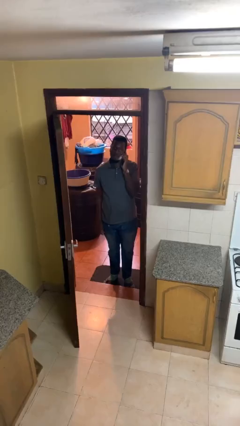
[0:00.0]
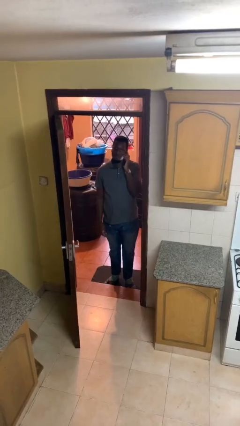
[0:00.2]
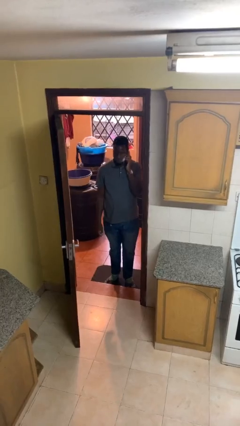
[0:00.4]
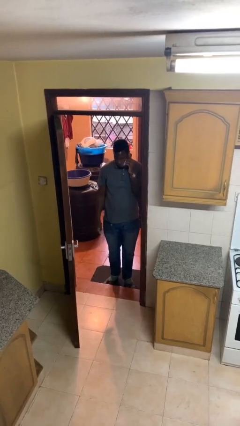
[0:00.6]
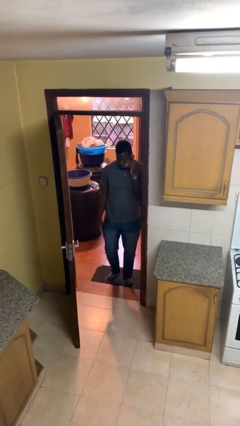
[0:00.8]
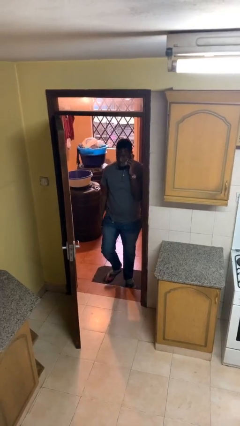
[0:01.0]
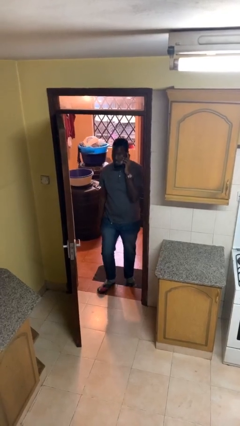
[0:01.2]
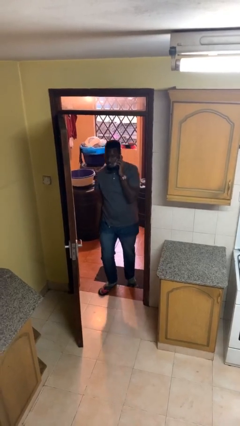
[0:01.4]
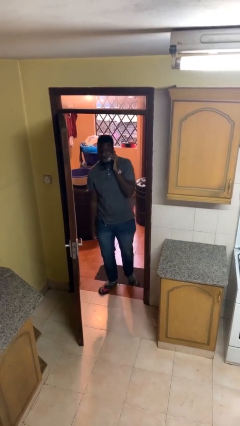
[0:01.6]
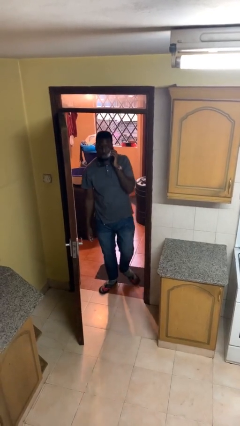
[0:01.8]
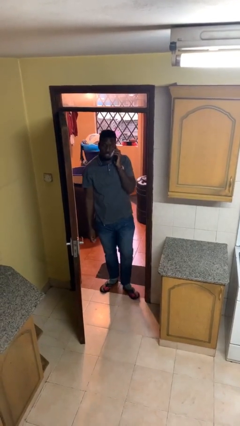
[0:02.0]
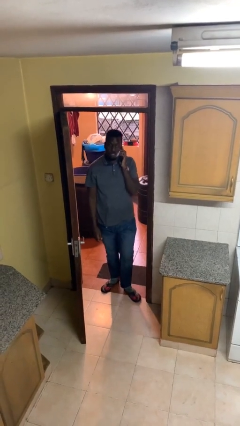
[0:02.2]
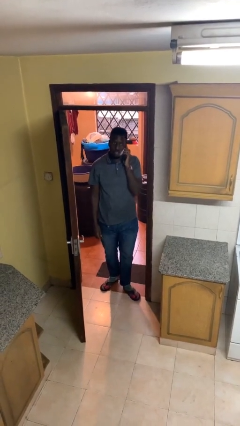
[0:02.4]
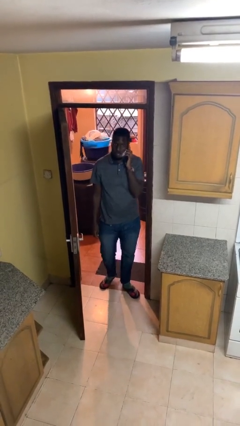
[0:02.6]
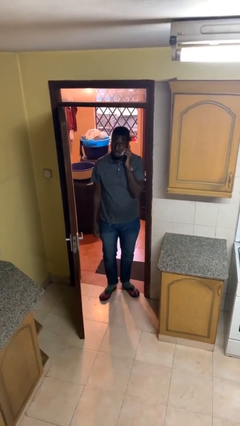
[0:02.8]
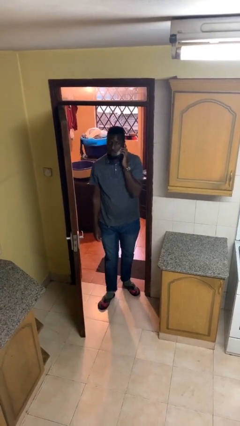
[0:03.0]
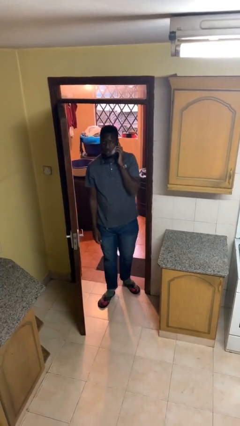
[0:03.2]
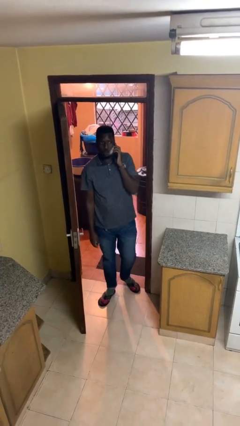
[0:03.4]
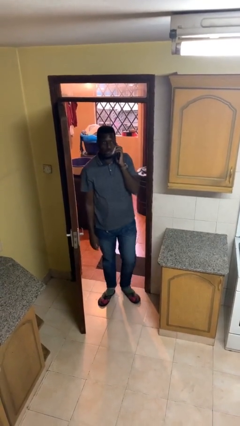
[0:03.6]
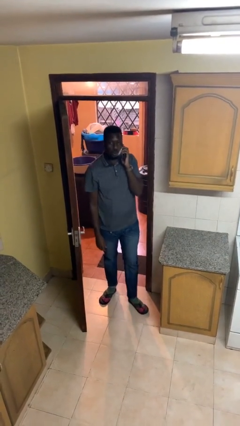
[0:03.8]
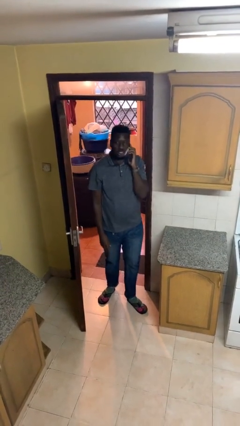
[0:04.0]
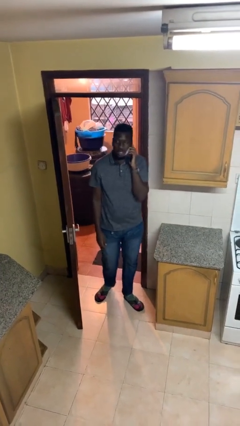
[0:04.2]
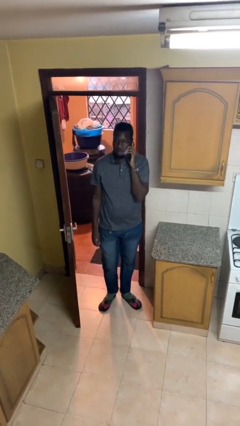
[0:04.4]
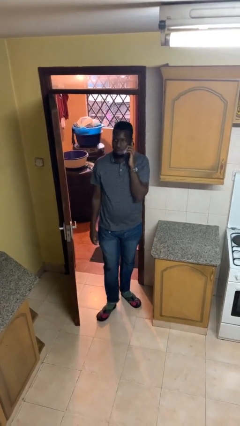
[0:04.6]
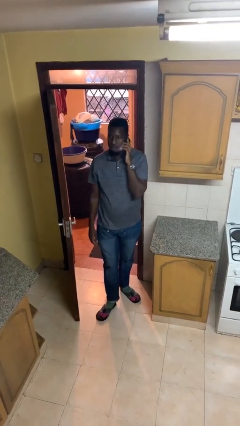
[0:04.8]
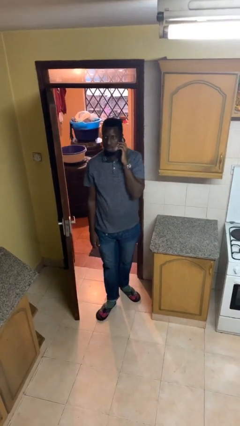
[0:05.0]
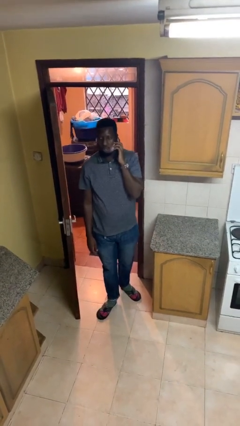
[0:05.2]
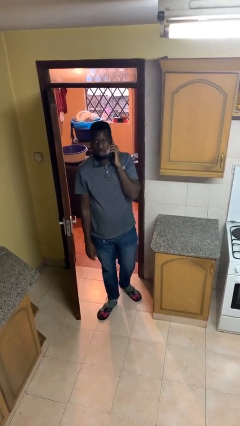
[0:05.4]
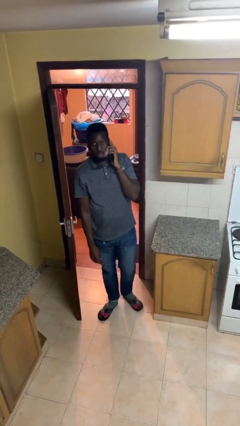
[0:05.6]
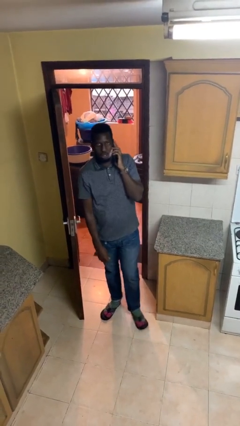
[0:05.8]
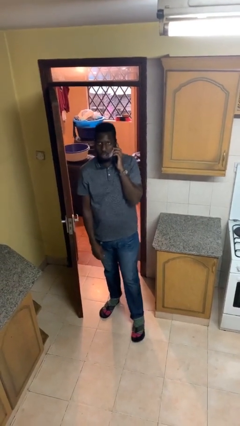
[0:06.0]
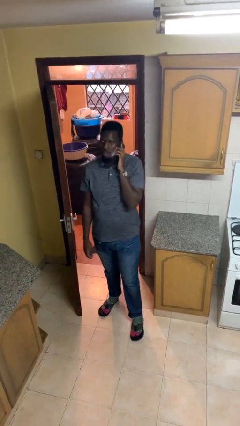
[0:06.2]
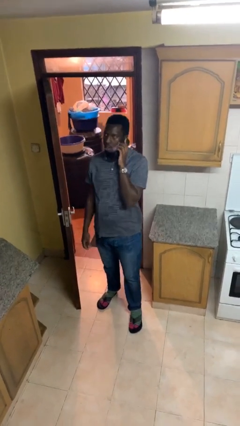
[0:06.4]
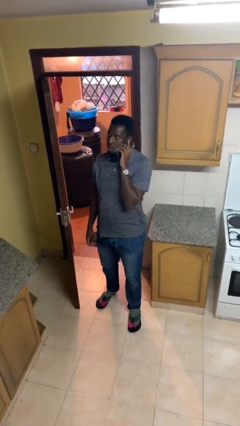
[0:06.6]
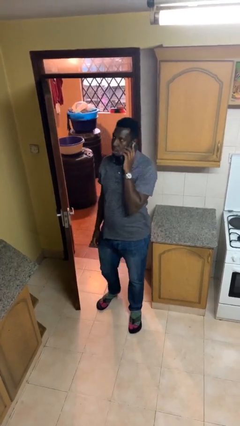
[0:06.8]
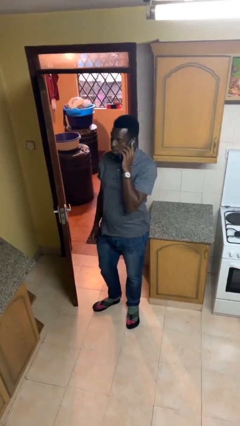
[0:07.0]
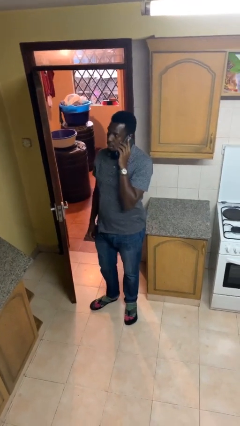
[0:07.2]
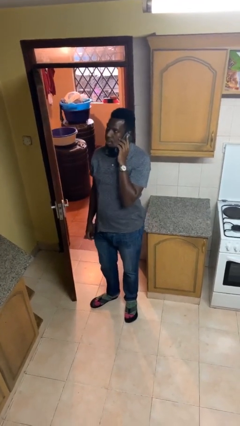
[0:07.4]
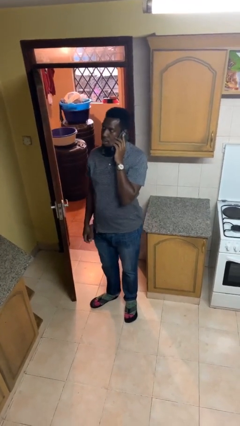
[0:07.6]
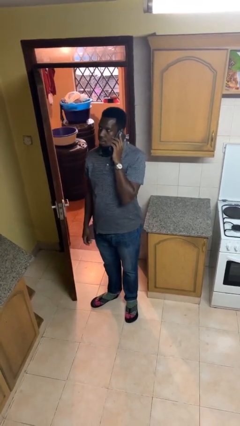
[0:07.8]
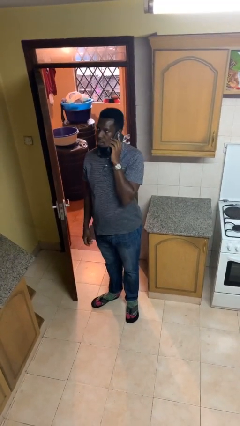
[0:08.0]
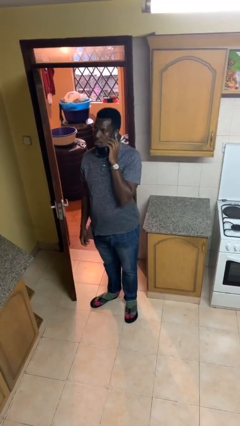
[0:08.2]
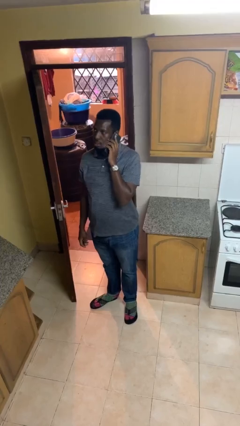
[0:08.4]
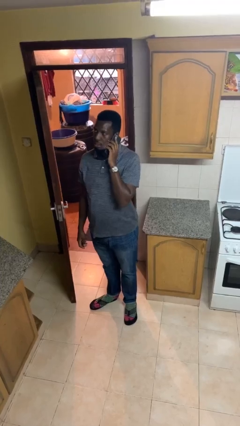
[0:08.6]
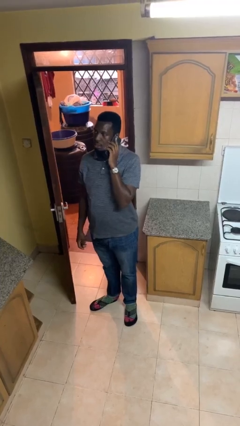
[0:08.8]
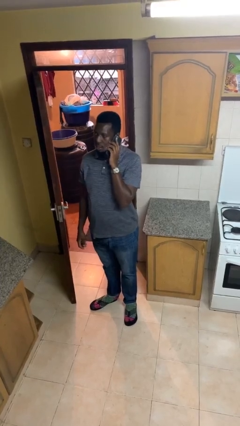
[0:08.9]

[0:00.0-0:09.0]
person enters scene through structure

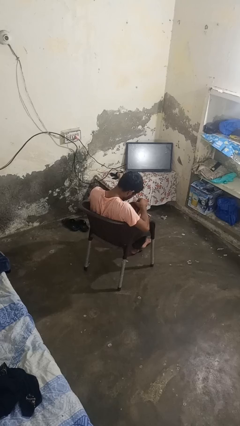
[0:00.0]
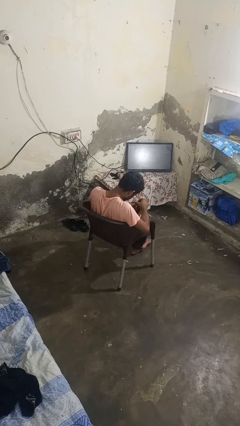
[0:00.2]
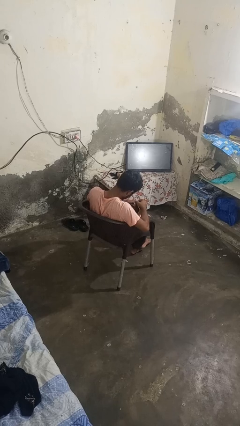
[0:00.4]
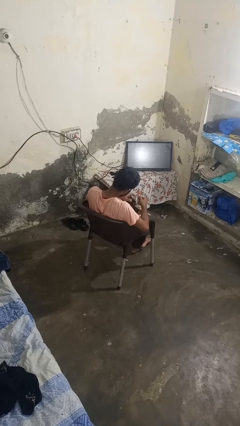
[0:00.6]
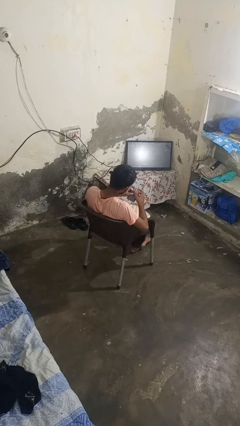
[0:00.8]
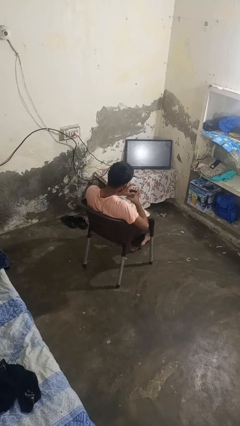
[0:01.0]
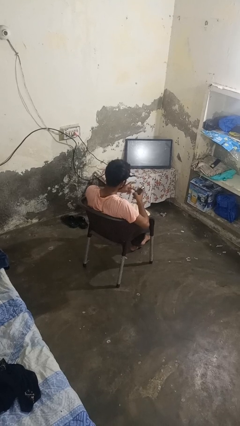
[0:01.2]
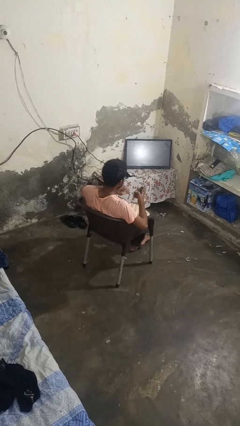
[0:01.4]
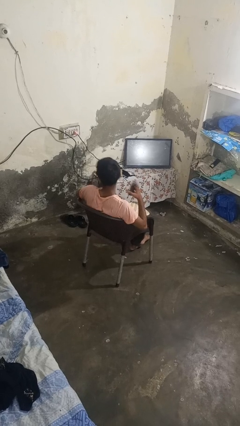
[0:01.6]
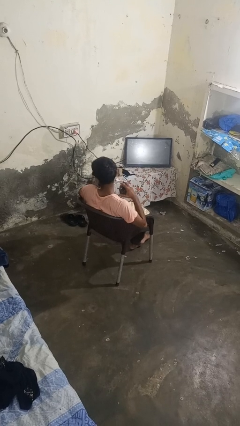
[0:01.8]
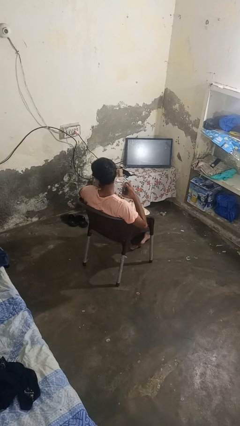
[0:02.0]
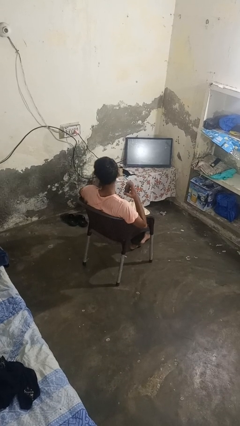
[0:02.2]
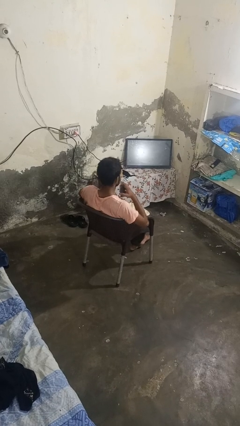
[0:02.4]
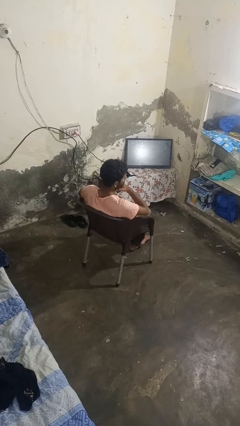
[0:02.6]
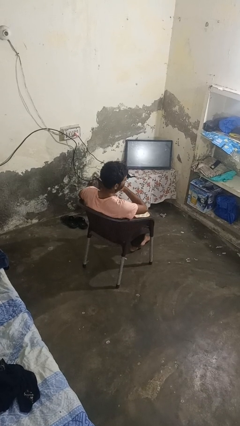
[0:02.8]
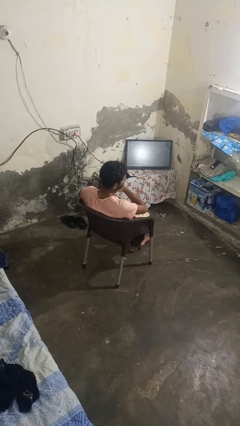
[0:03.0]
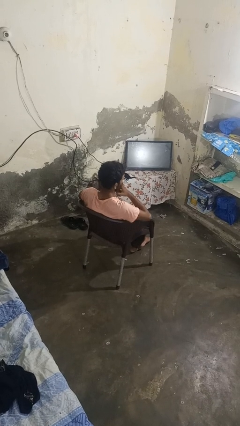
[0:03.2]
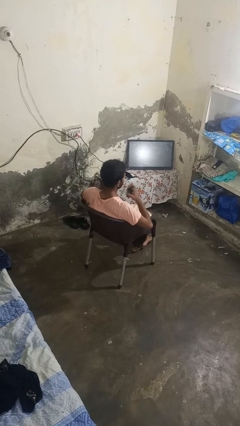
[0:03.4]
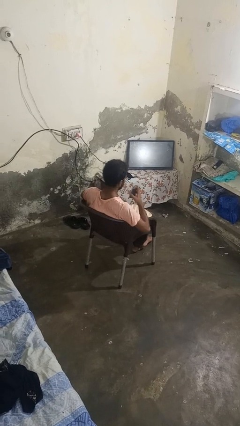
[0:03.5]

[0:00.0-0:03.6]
person takes object from purse

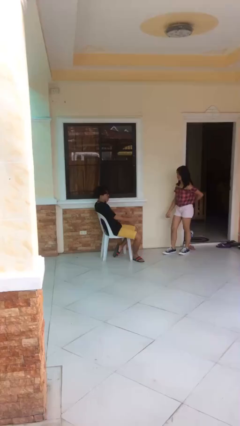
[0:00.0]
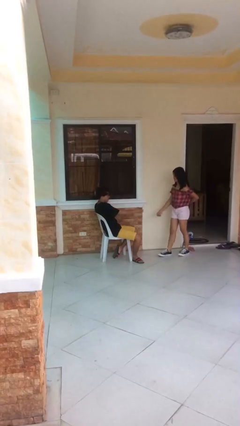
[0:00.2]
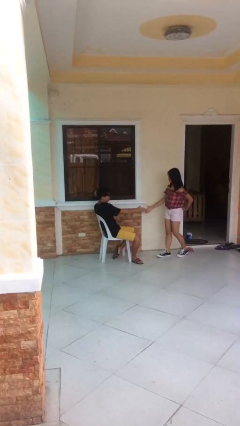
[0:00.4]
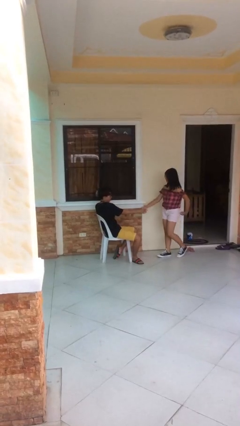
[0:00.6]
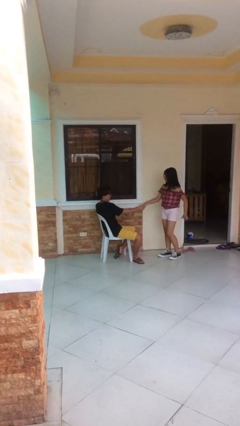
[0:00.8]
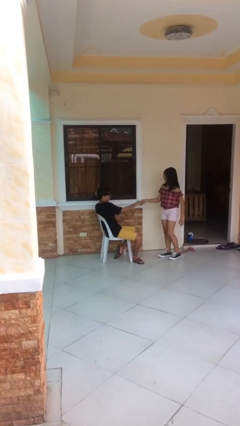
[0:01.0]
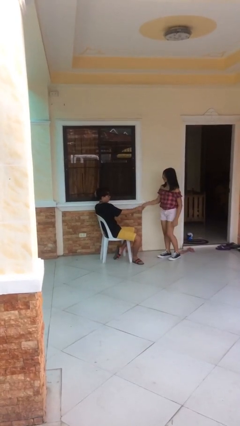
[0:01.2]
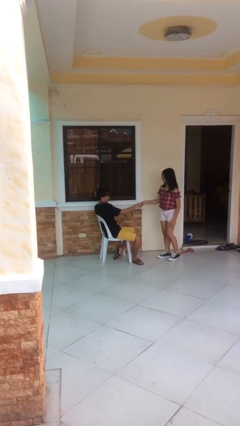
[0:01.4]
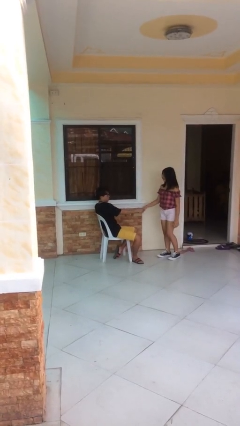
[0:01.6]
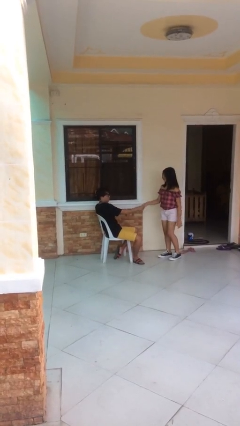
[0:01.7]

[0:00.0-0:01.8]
person shakes hand

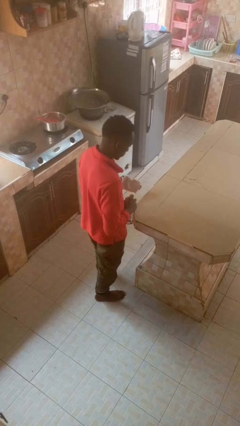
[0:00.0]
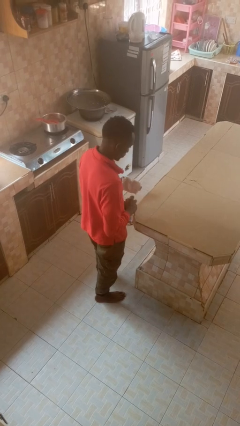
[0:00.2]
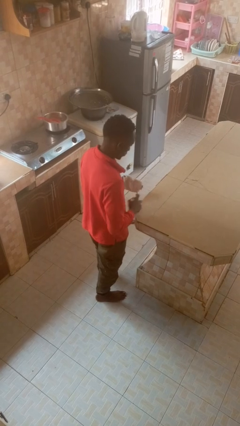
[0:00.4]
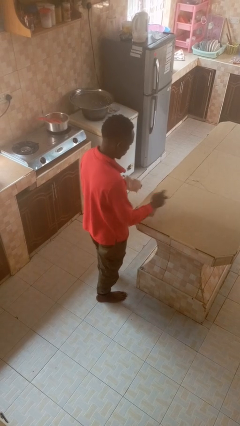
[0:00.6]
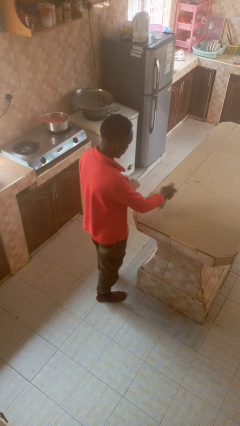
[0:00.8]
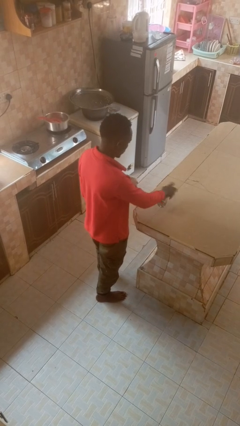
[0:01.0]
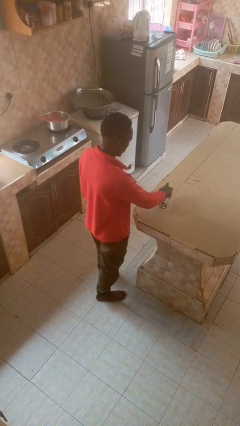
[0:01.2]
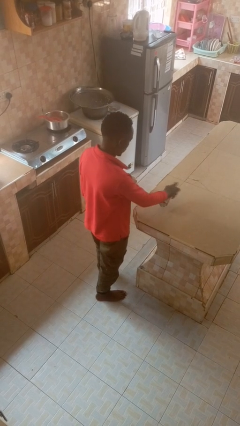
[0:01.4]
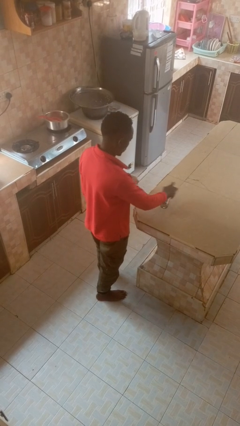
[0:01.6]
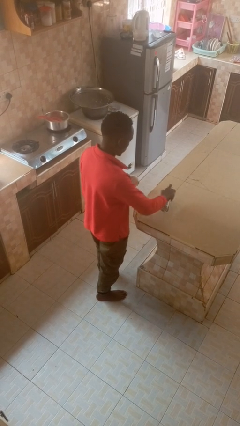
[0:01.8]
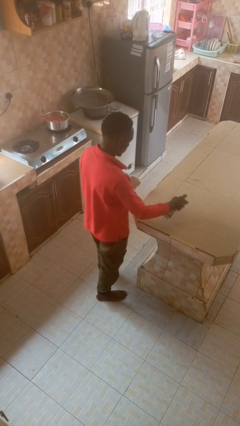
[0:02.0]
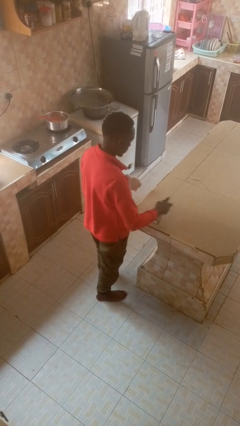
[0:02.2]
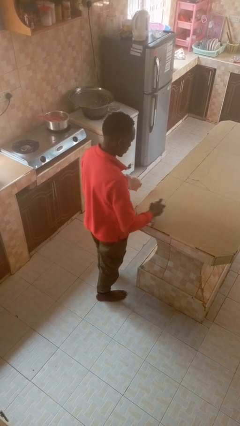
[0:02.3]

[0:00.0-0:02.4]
person sprays from bottle

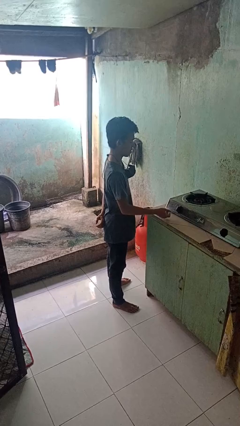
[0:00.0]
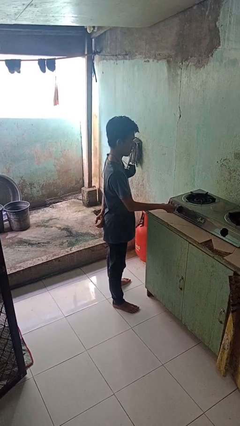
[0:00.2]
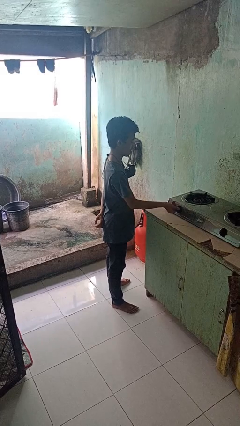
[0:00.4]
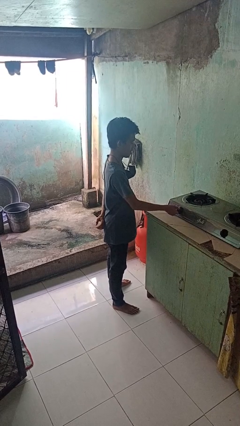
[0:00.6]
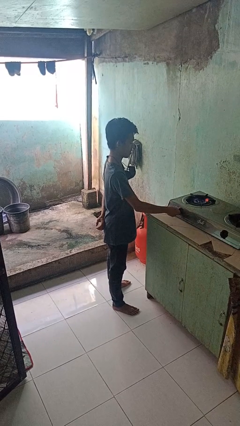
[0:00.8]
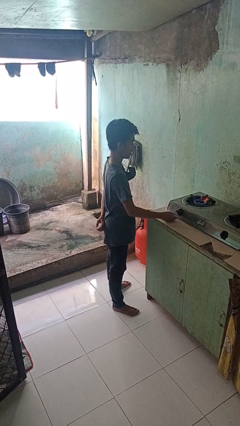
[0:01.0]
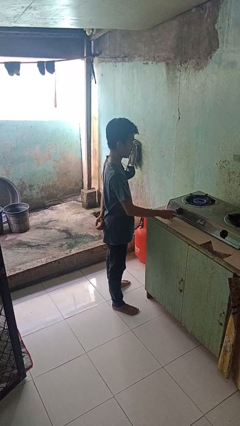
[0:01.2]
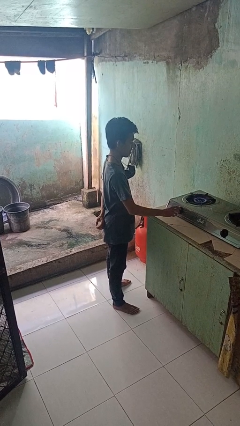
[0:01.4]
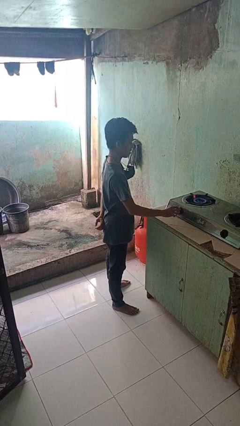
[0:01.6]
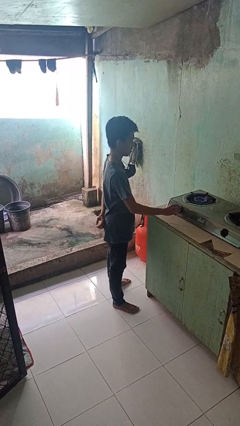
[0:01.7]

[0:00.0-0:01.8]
person turns on stovetop
